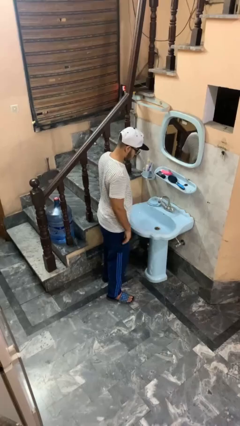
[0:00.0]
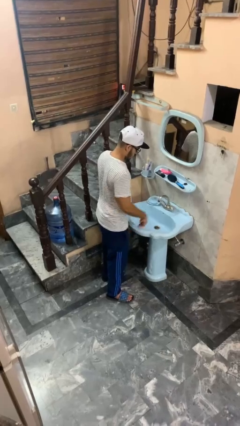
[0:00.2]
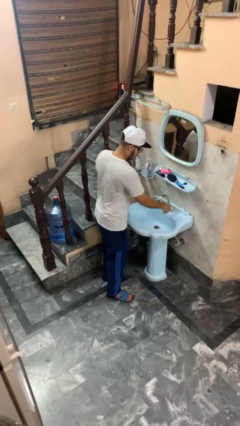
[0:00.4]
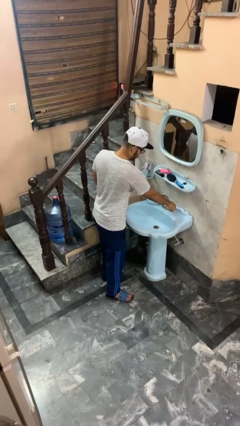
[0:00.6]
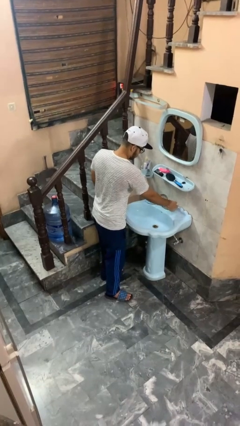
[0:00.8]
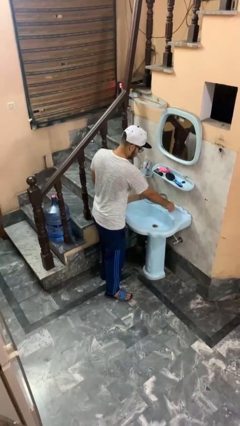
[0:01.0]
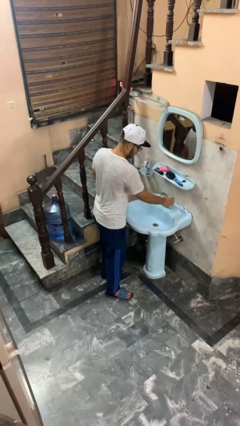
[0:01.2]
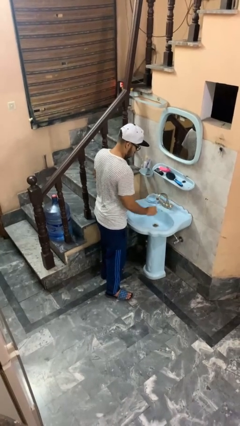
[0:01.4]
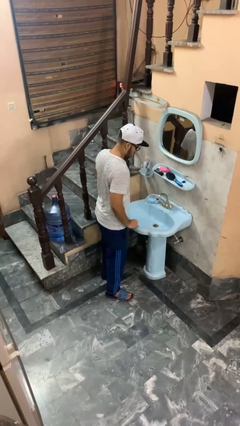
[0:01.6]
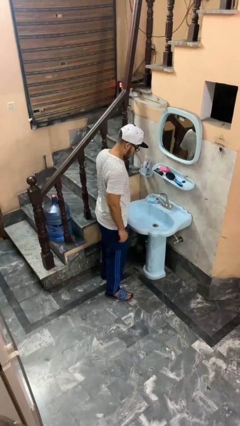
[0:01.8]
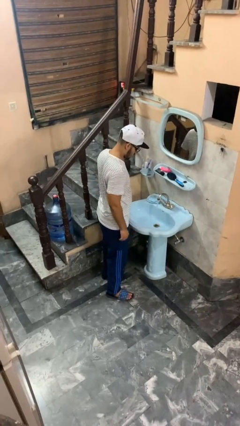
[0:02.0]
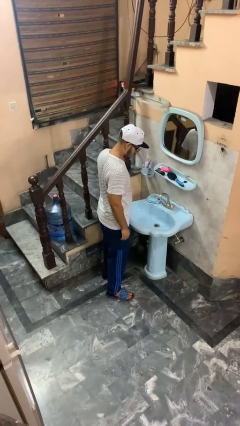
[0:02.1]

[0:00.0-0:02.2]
person turns on faucet

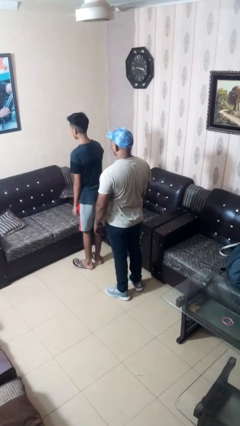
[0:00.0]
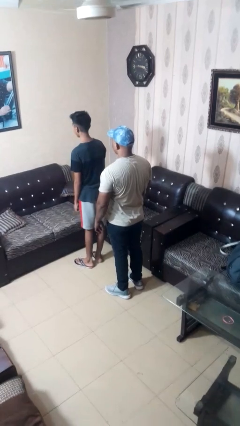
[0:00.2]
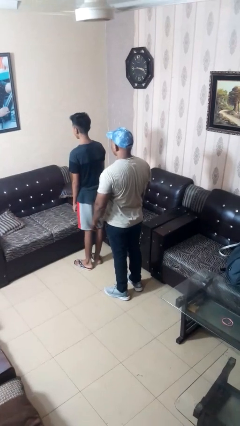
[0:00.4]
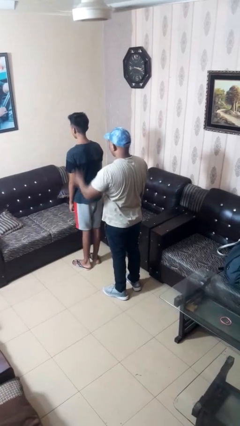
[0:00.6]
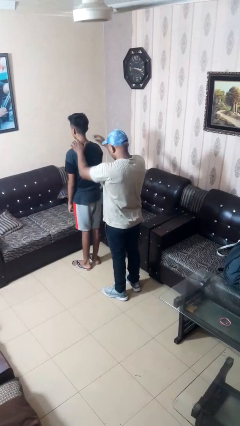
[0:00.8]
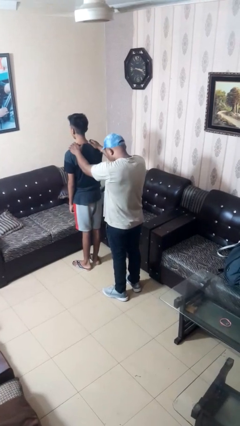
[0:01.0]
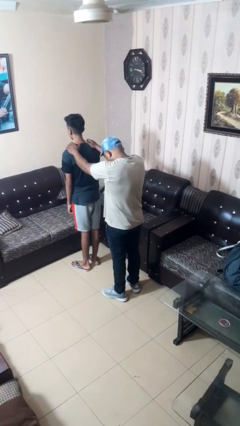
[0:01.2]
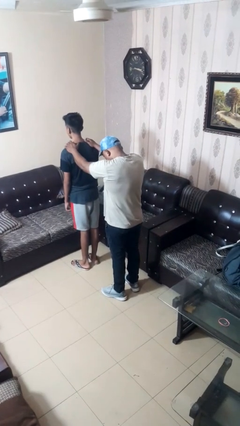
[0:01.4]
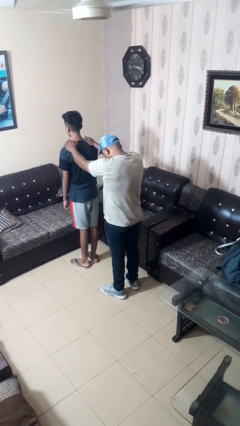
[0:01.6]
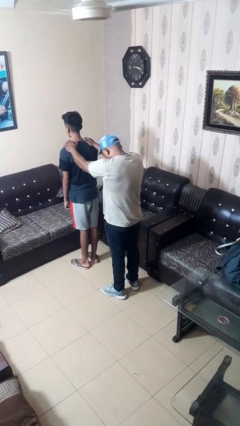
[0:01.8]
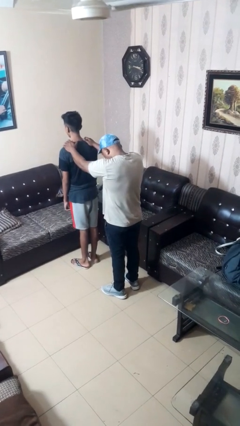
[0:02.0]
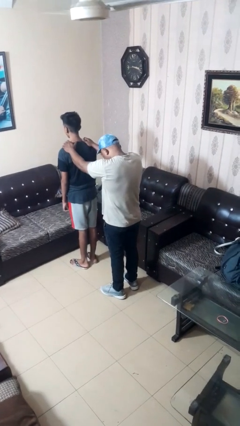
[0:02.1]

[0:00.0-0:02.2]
person grabs person by shoulder

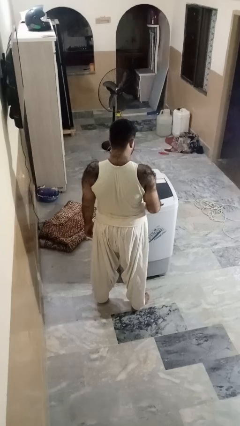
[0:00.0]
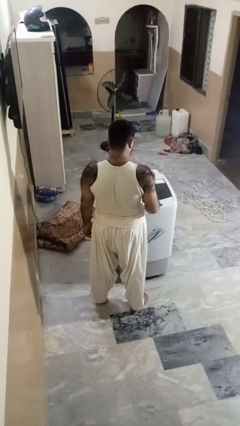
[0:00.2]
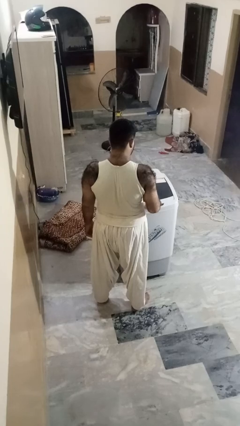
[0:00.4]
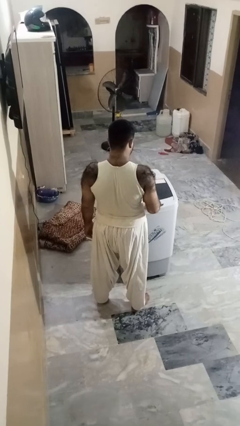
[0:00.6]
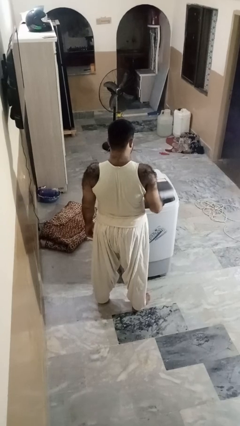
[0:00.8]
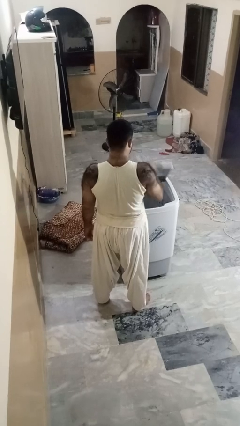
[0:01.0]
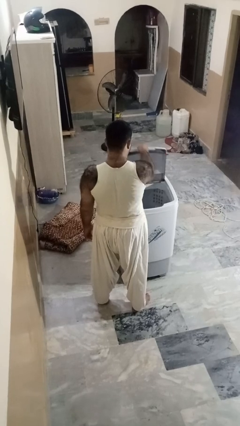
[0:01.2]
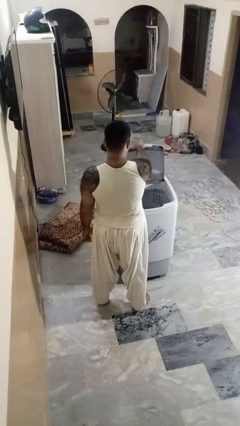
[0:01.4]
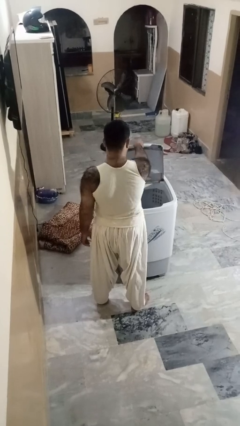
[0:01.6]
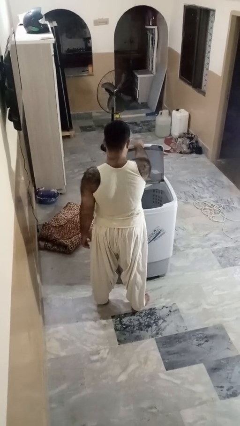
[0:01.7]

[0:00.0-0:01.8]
person opens clothes washer

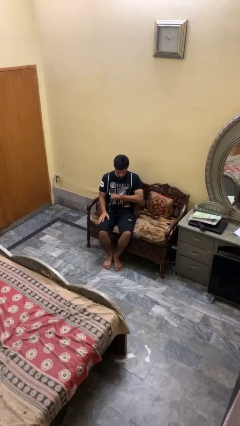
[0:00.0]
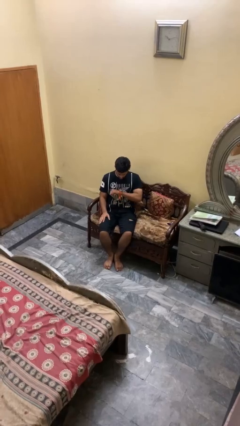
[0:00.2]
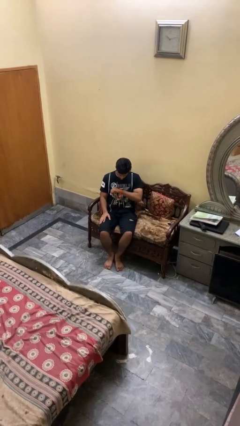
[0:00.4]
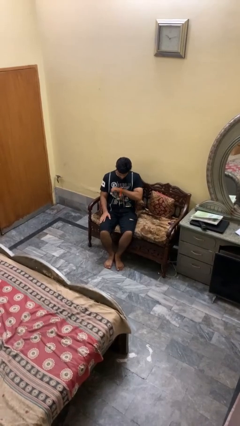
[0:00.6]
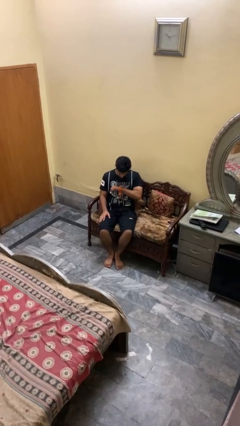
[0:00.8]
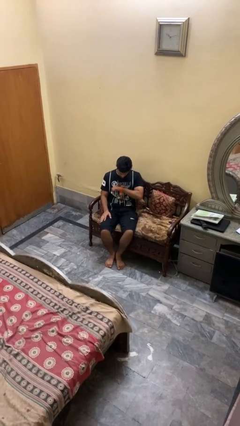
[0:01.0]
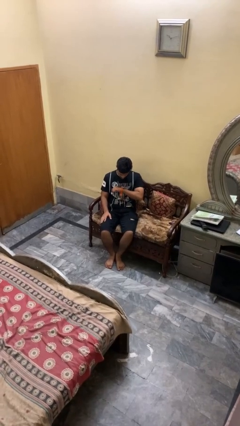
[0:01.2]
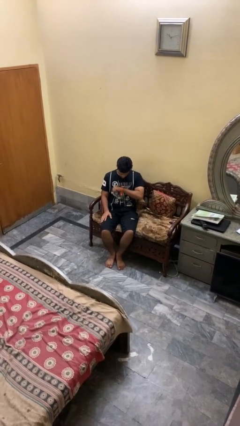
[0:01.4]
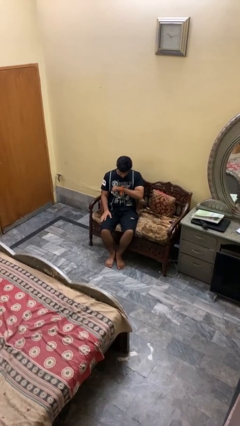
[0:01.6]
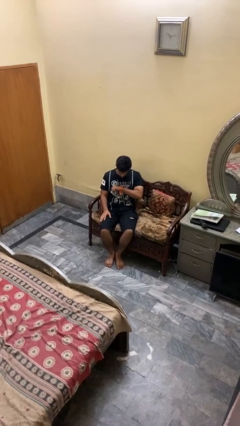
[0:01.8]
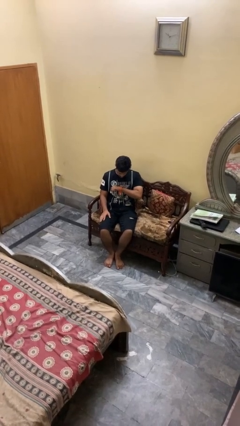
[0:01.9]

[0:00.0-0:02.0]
person looks at wristwatch

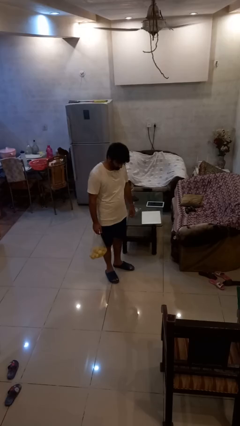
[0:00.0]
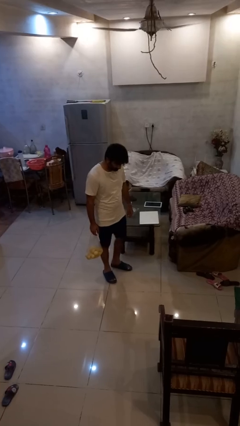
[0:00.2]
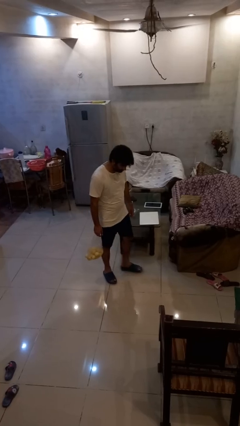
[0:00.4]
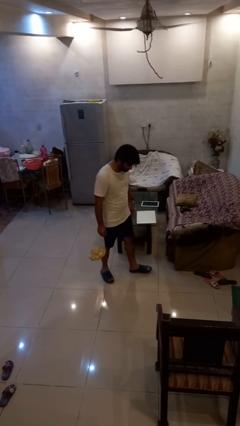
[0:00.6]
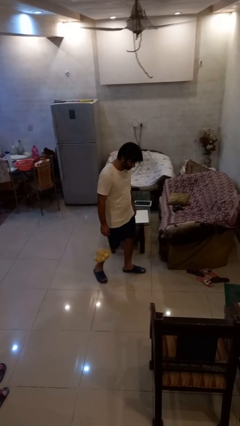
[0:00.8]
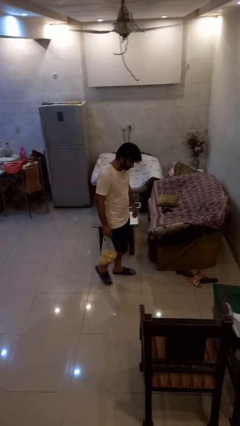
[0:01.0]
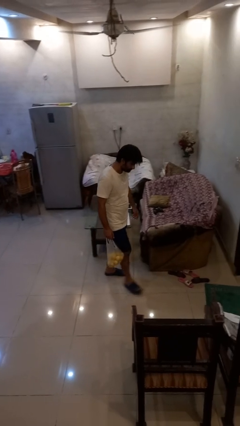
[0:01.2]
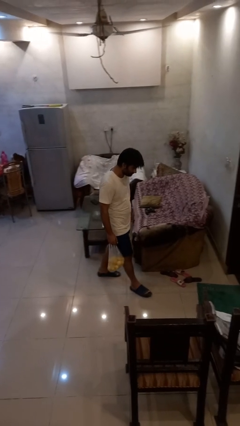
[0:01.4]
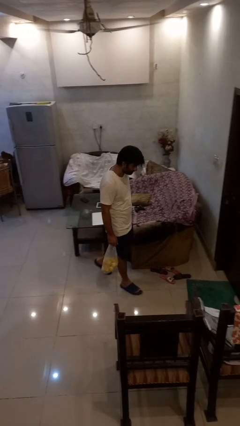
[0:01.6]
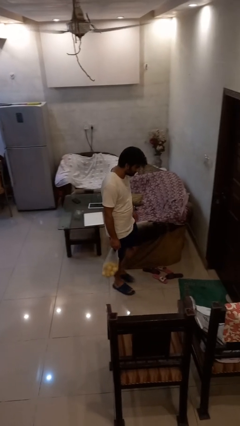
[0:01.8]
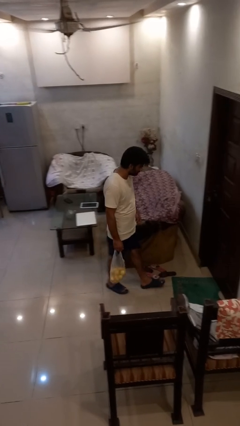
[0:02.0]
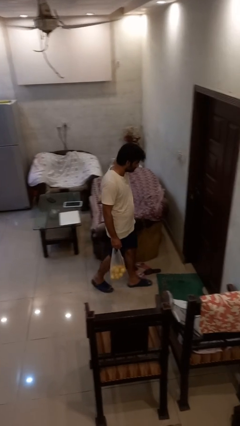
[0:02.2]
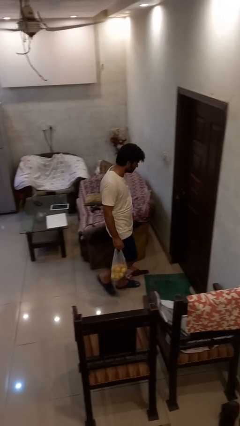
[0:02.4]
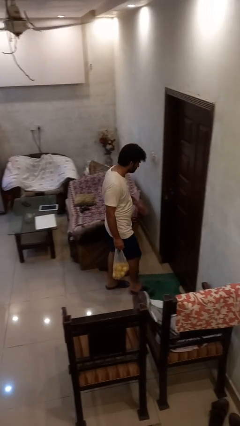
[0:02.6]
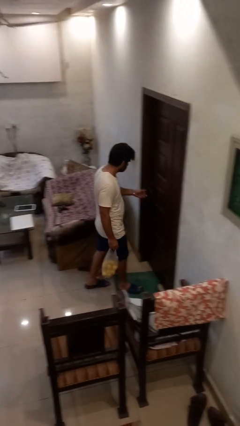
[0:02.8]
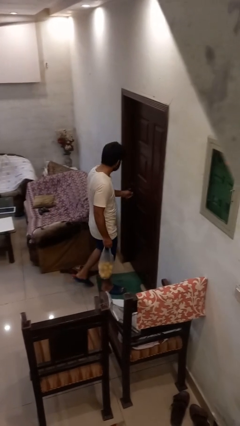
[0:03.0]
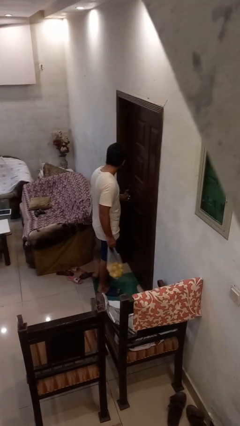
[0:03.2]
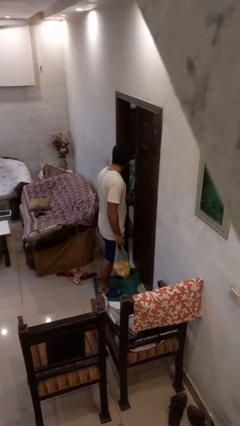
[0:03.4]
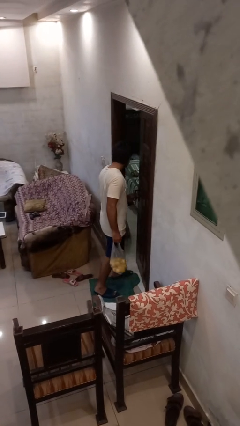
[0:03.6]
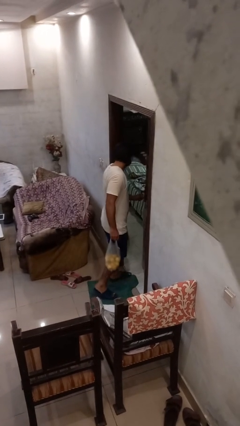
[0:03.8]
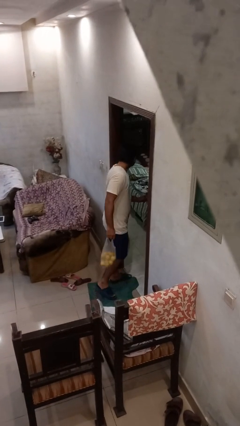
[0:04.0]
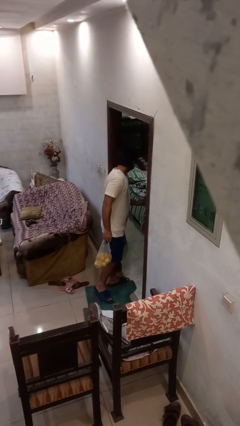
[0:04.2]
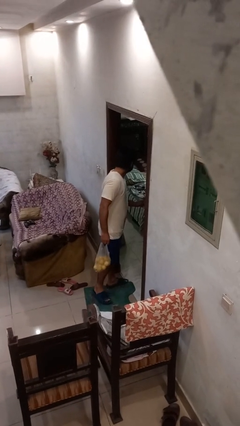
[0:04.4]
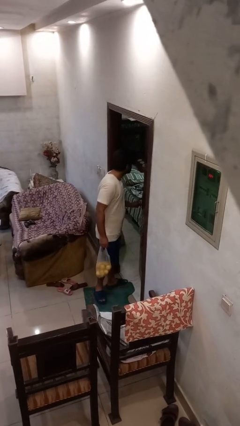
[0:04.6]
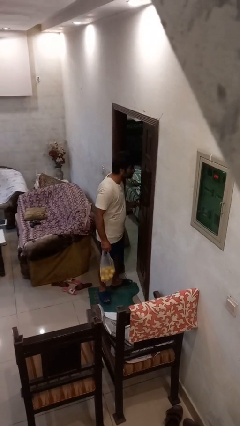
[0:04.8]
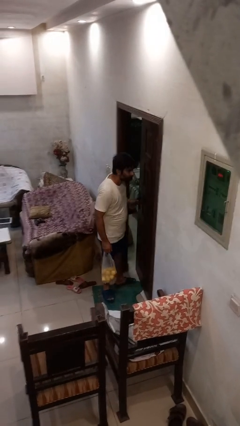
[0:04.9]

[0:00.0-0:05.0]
person carries groceries

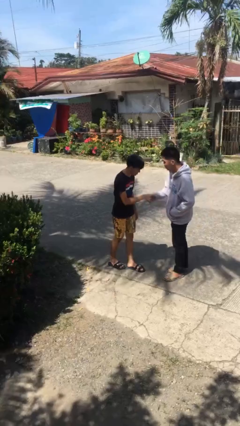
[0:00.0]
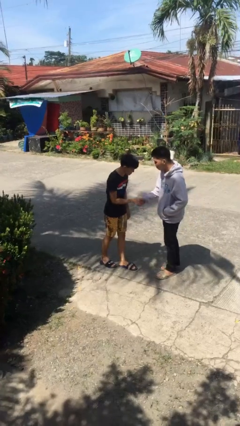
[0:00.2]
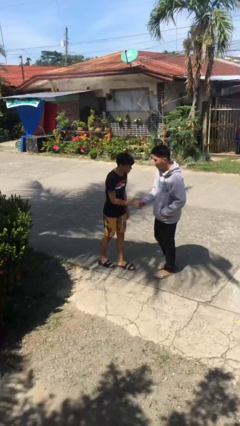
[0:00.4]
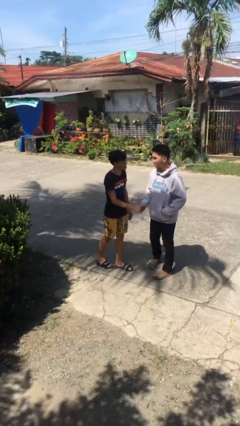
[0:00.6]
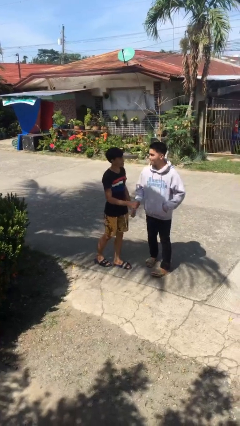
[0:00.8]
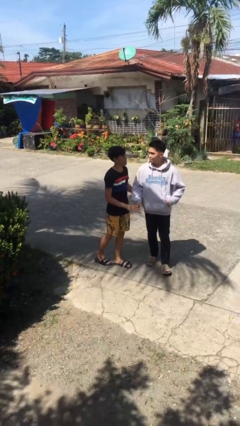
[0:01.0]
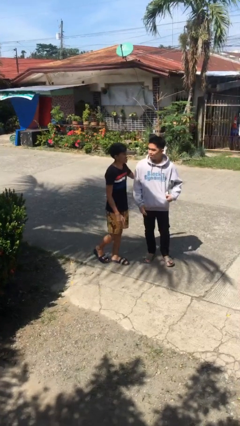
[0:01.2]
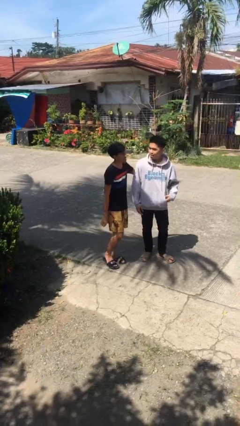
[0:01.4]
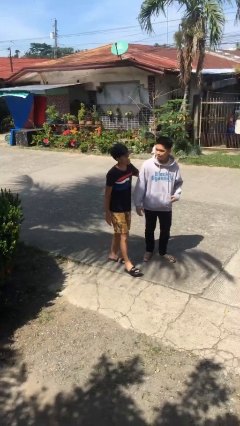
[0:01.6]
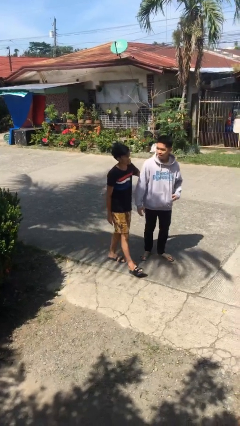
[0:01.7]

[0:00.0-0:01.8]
person shakes hand

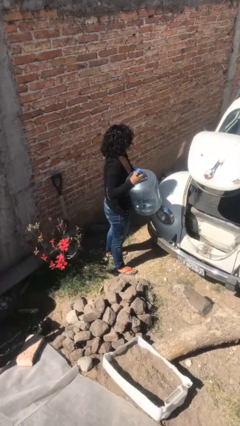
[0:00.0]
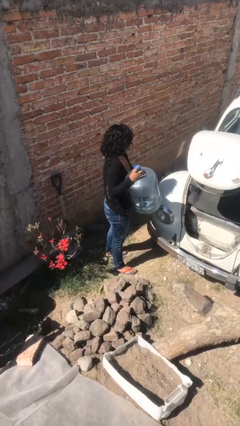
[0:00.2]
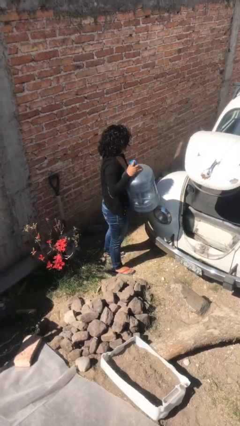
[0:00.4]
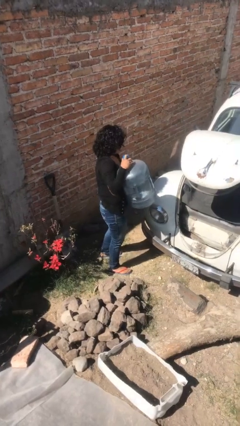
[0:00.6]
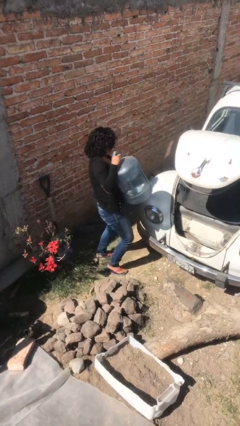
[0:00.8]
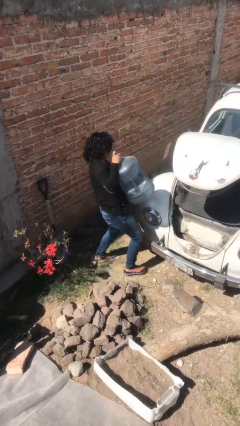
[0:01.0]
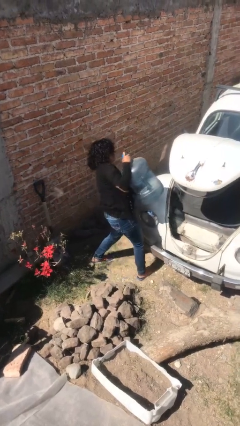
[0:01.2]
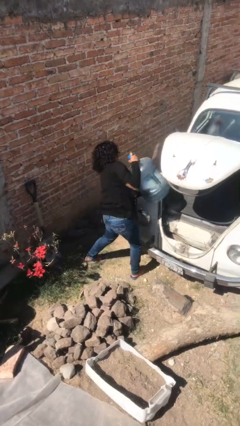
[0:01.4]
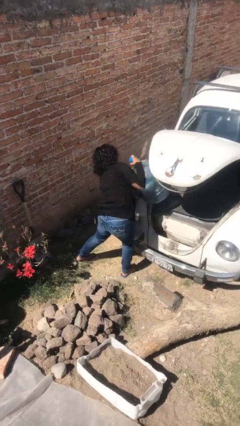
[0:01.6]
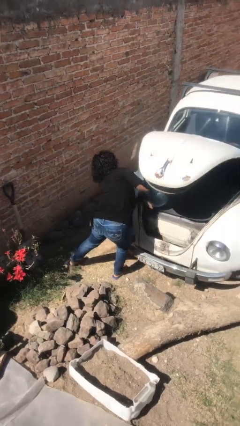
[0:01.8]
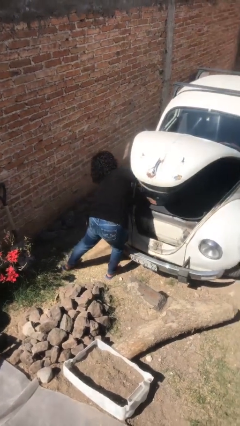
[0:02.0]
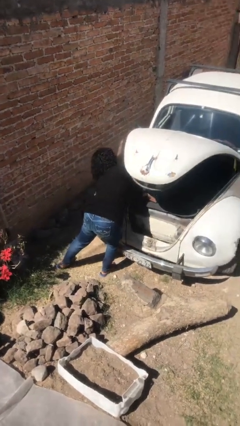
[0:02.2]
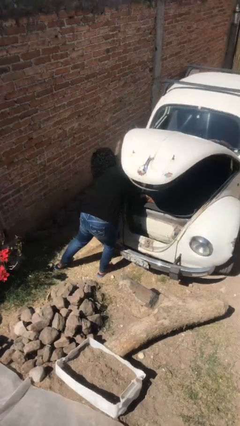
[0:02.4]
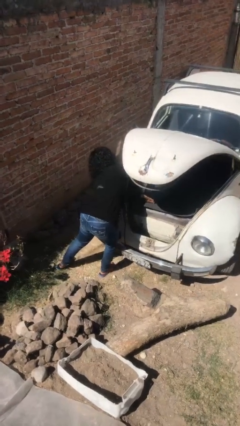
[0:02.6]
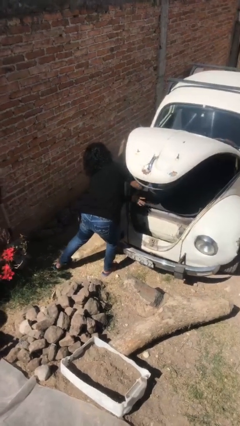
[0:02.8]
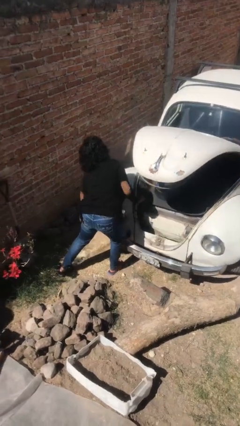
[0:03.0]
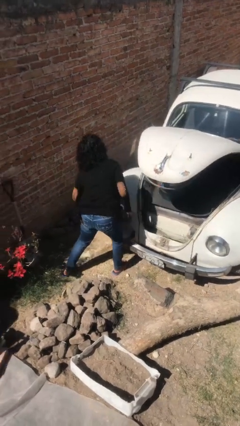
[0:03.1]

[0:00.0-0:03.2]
person loads car
